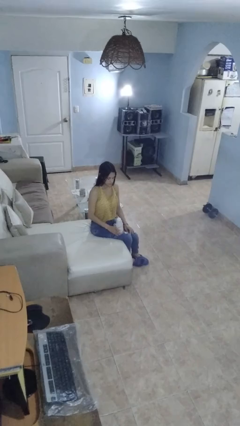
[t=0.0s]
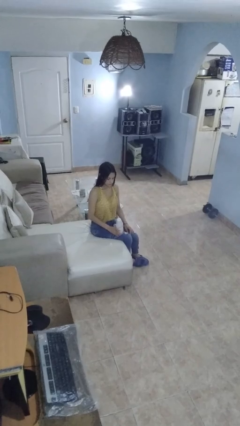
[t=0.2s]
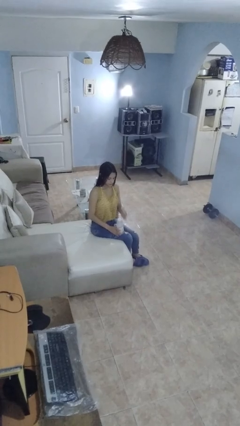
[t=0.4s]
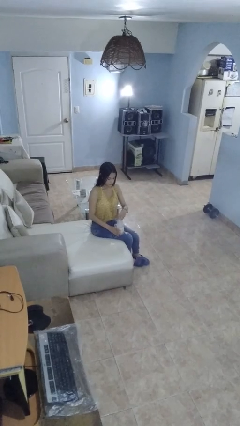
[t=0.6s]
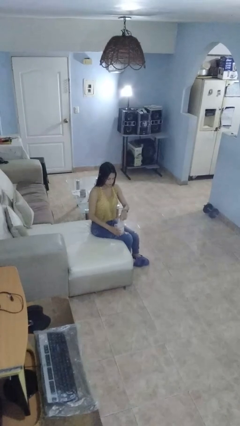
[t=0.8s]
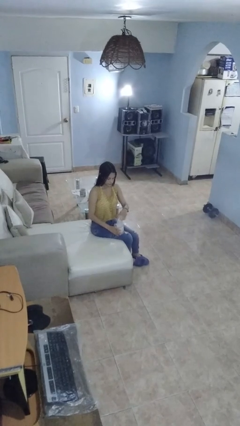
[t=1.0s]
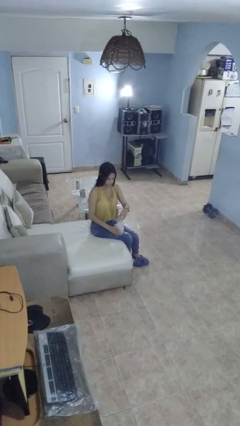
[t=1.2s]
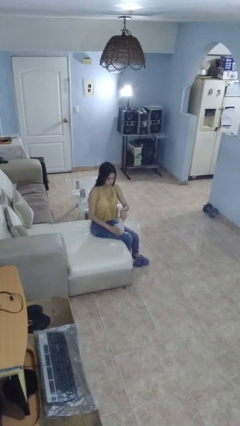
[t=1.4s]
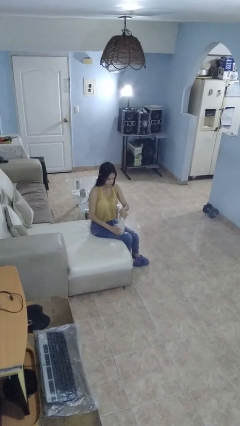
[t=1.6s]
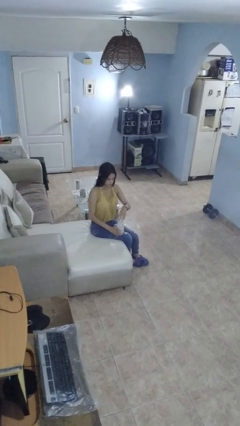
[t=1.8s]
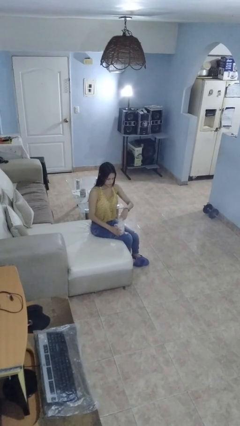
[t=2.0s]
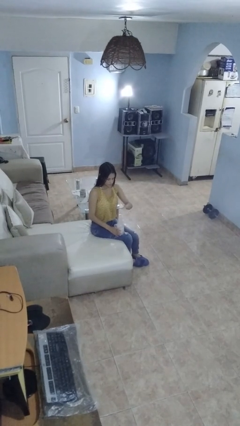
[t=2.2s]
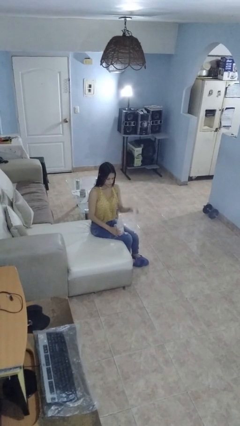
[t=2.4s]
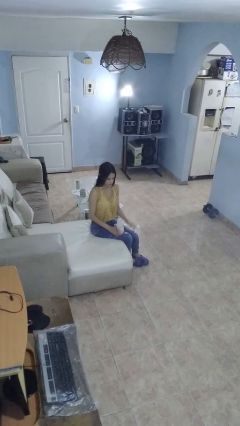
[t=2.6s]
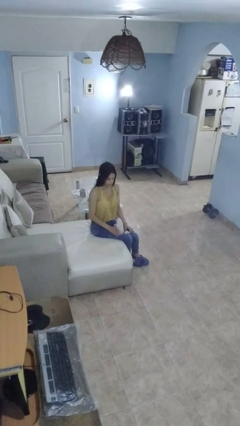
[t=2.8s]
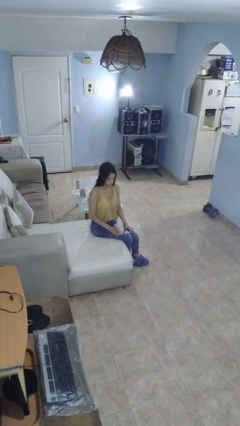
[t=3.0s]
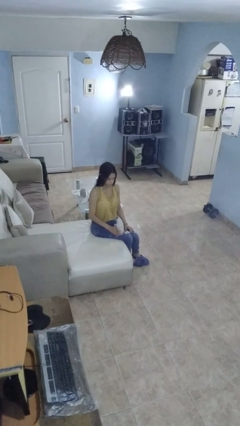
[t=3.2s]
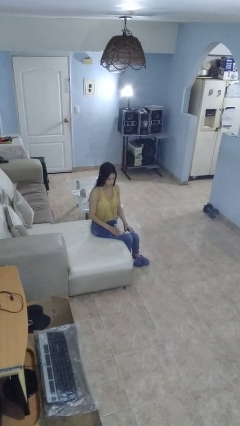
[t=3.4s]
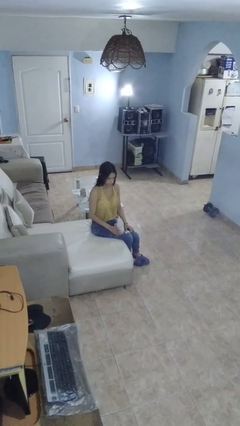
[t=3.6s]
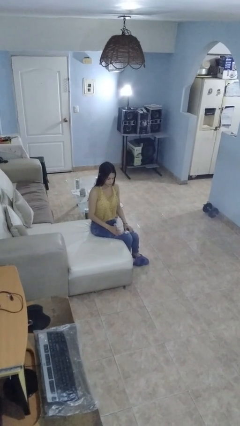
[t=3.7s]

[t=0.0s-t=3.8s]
person unscrews lid from bottle

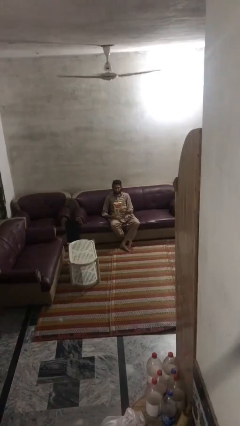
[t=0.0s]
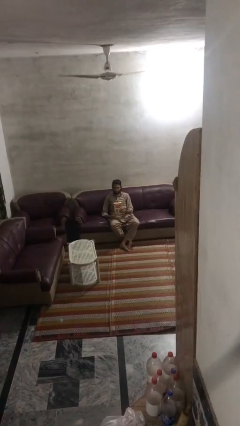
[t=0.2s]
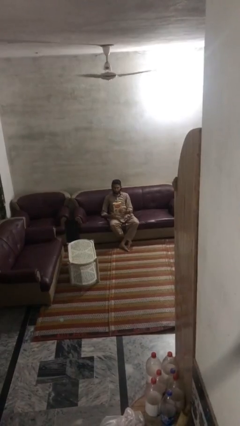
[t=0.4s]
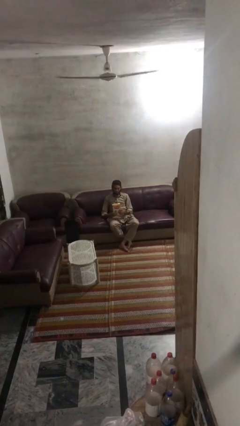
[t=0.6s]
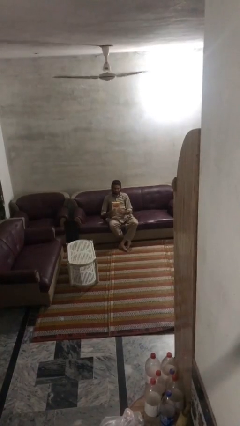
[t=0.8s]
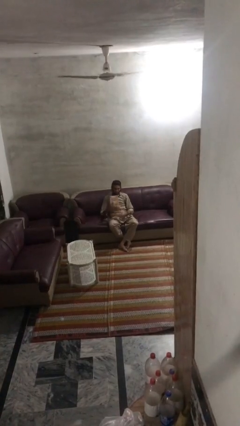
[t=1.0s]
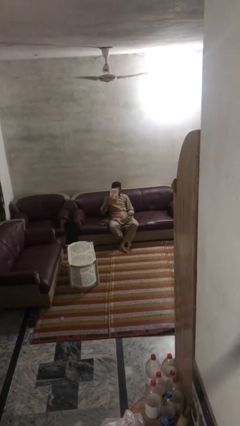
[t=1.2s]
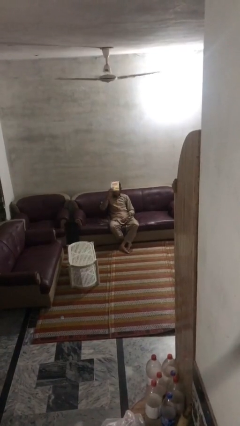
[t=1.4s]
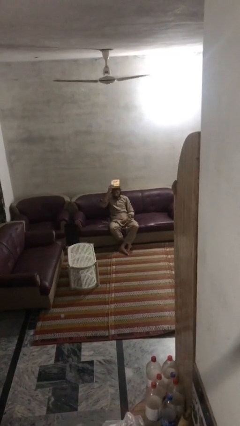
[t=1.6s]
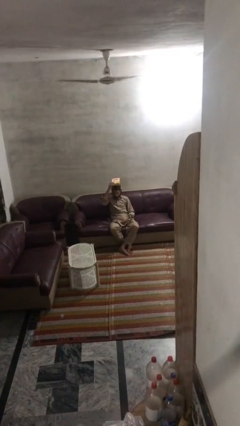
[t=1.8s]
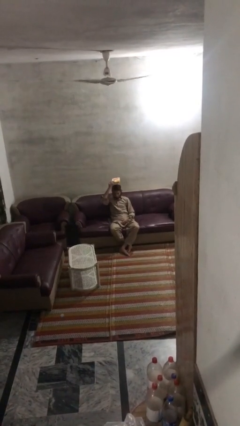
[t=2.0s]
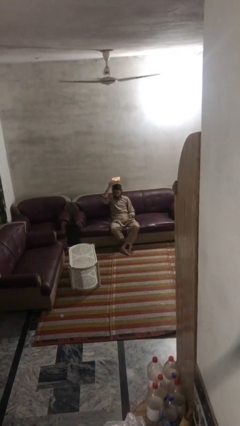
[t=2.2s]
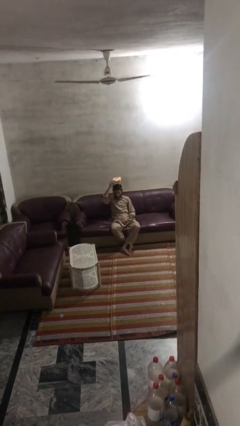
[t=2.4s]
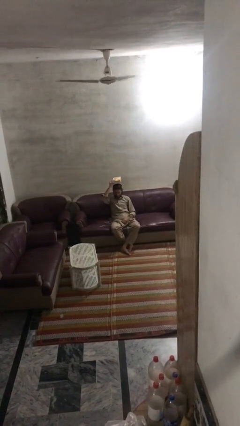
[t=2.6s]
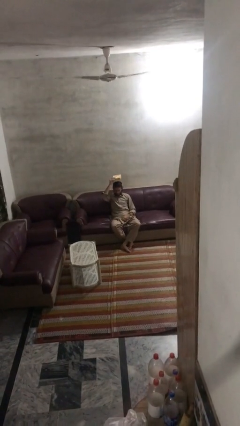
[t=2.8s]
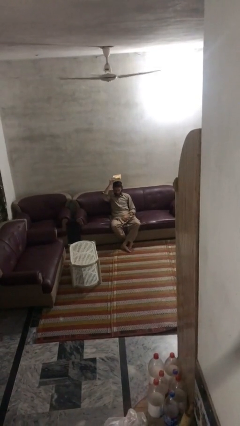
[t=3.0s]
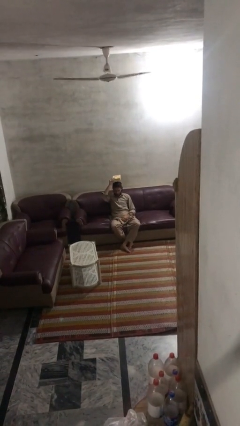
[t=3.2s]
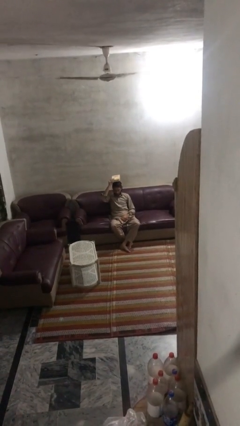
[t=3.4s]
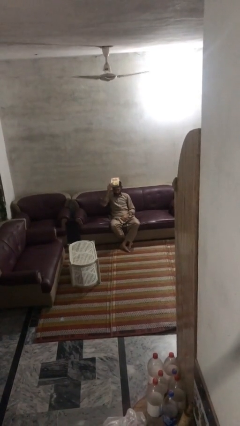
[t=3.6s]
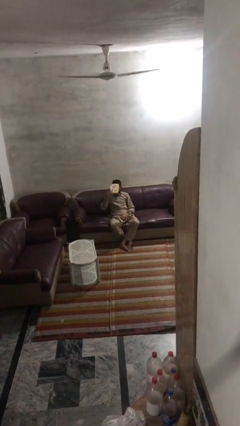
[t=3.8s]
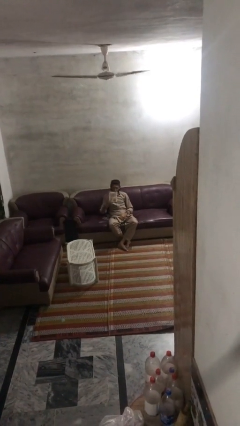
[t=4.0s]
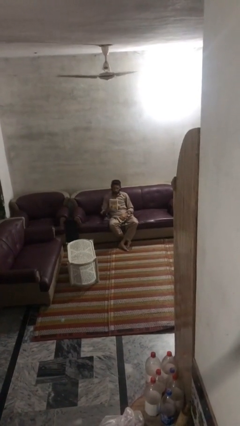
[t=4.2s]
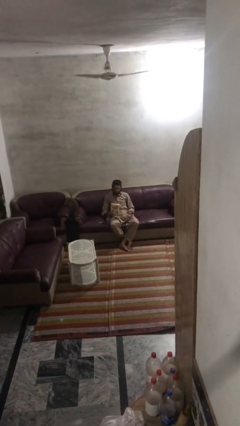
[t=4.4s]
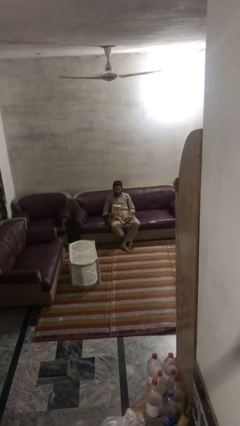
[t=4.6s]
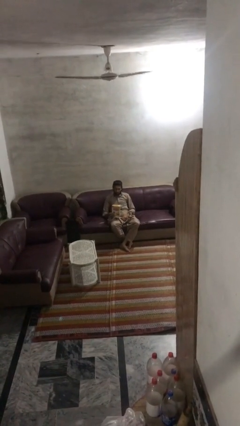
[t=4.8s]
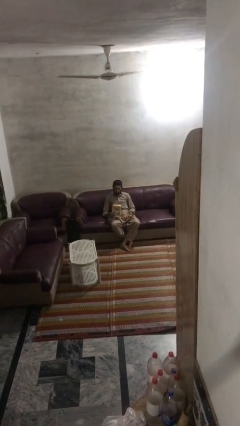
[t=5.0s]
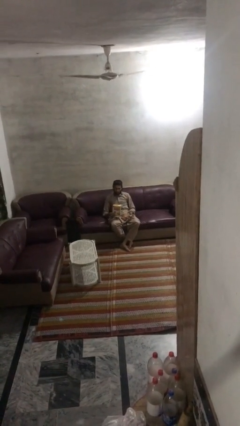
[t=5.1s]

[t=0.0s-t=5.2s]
person holds object above head

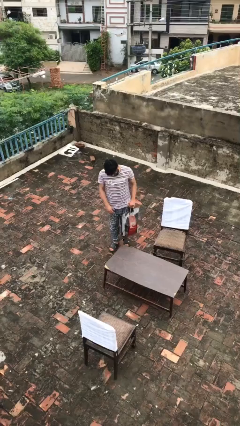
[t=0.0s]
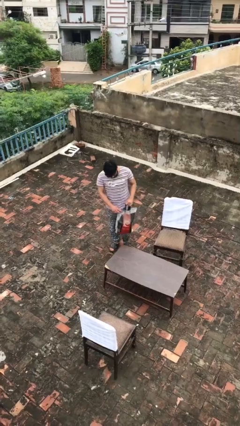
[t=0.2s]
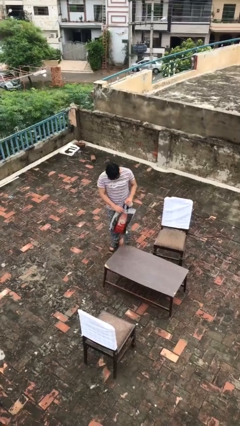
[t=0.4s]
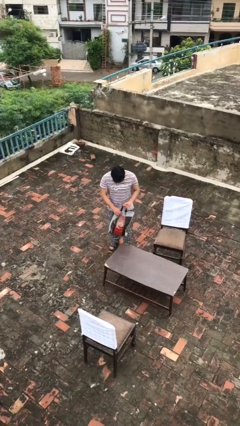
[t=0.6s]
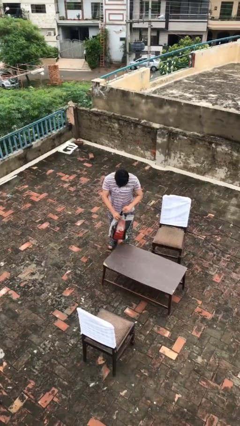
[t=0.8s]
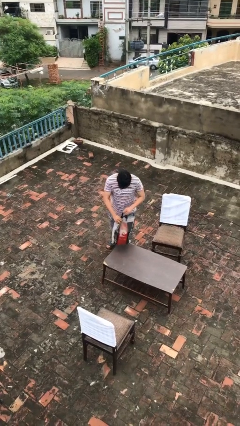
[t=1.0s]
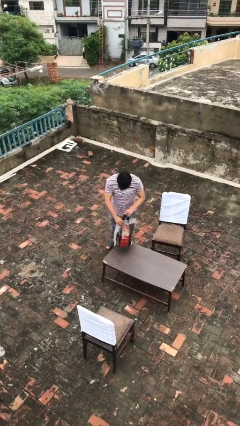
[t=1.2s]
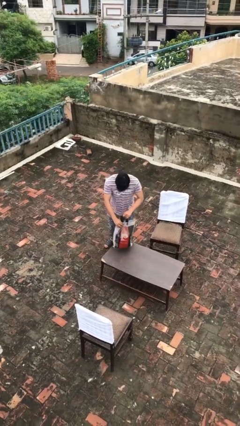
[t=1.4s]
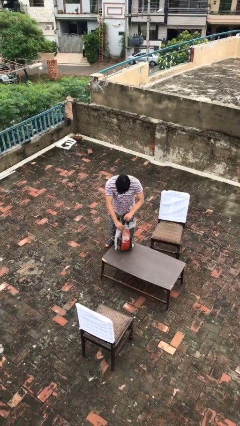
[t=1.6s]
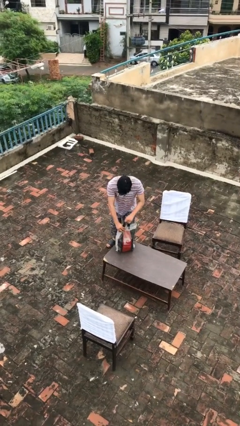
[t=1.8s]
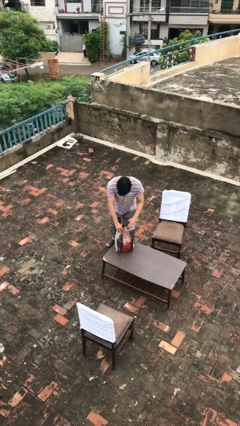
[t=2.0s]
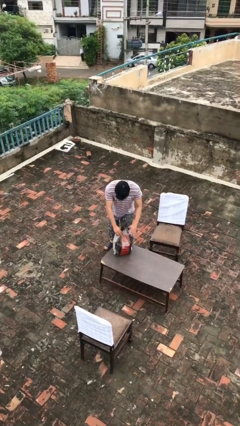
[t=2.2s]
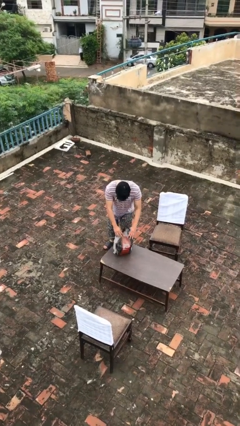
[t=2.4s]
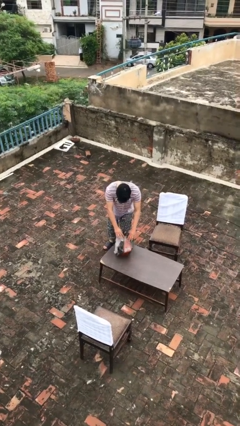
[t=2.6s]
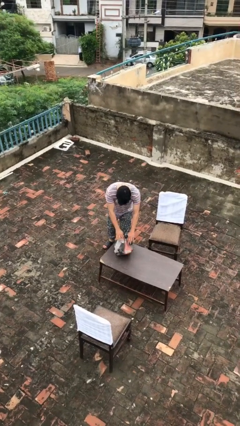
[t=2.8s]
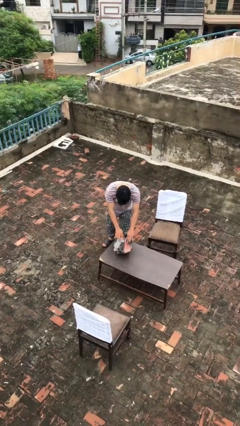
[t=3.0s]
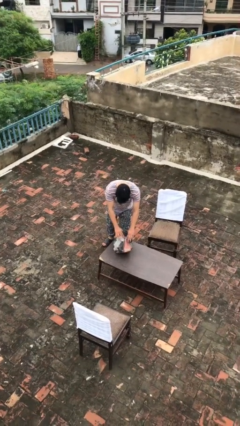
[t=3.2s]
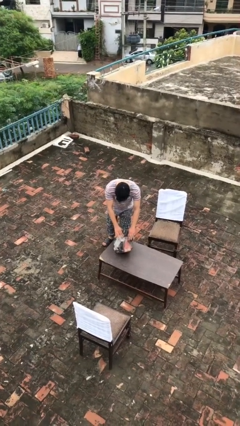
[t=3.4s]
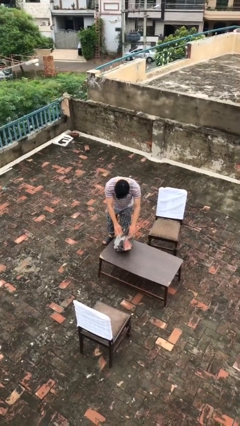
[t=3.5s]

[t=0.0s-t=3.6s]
person puts down object on table

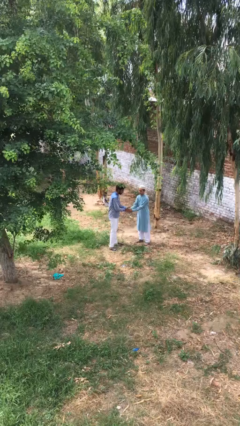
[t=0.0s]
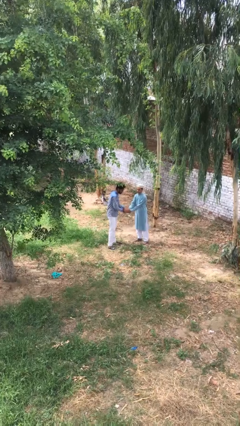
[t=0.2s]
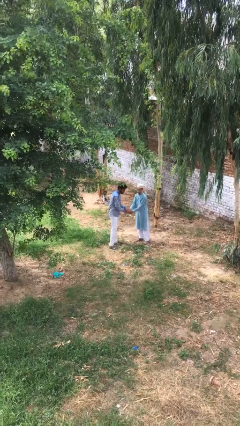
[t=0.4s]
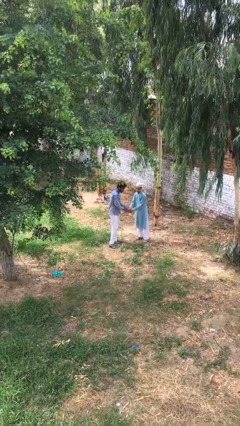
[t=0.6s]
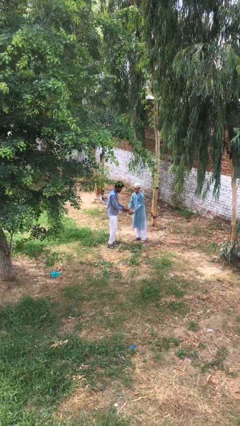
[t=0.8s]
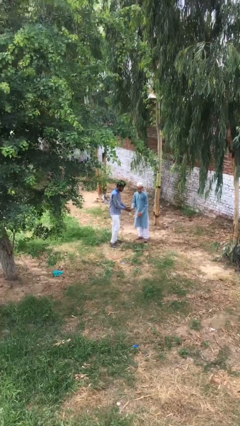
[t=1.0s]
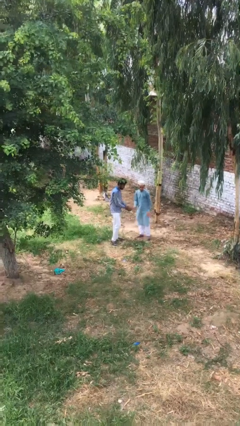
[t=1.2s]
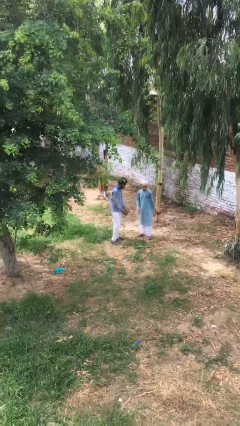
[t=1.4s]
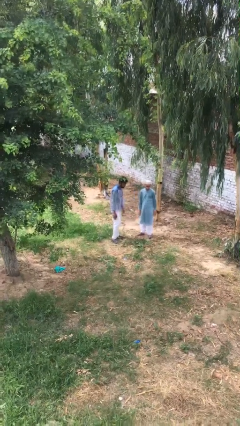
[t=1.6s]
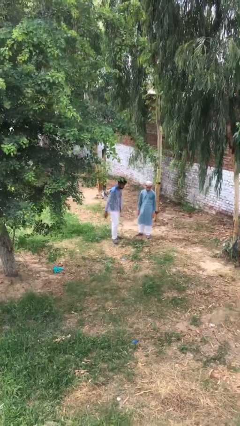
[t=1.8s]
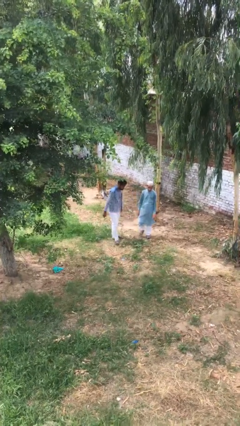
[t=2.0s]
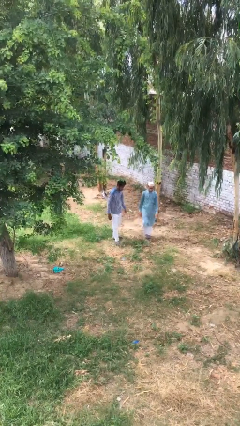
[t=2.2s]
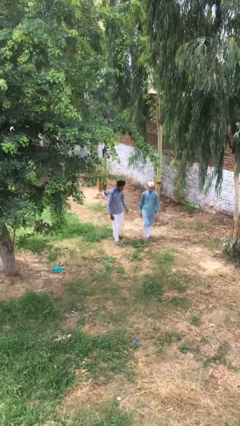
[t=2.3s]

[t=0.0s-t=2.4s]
person shakes hand

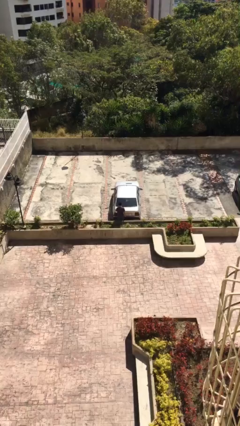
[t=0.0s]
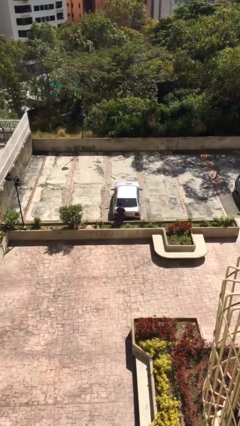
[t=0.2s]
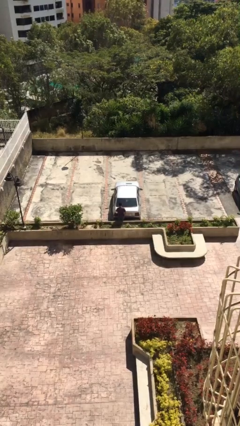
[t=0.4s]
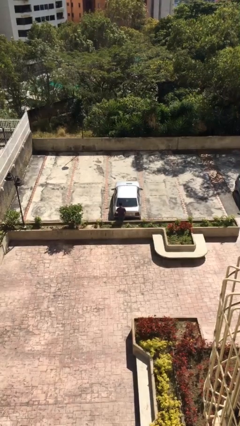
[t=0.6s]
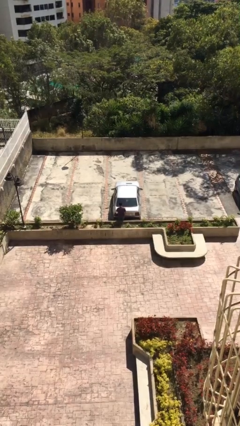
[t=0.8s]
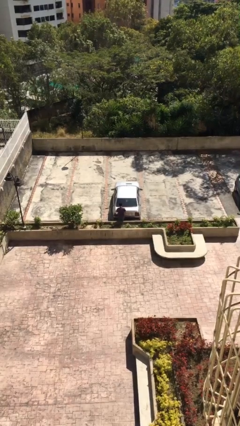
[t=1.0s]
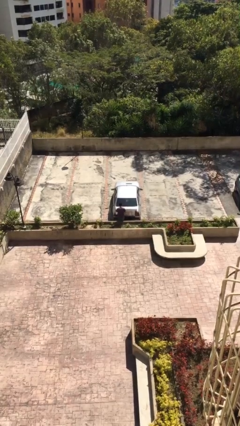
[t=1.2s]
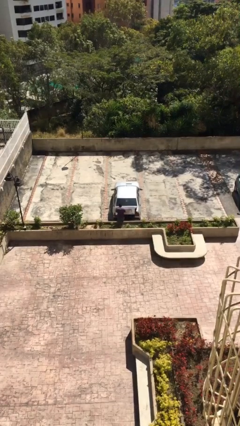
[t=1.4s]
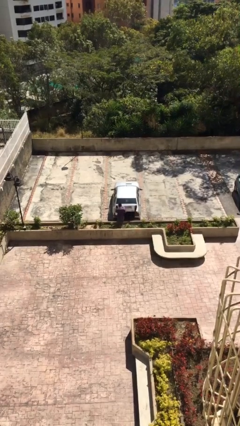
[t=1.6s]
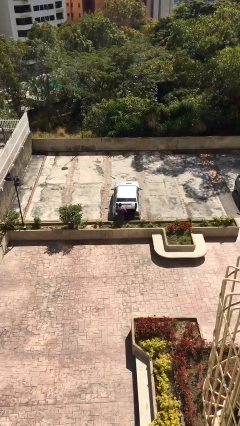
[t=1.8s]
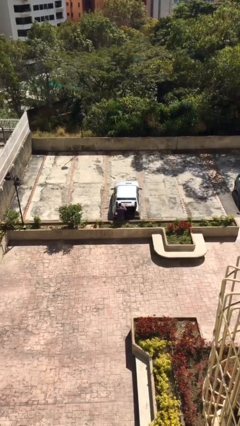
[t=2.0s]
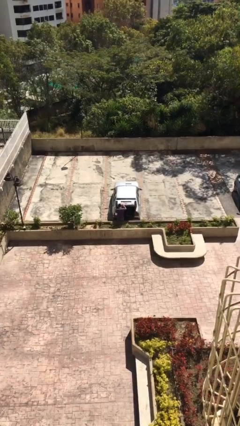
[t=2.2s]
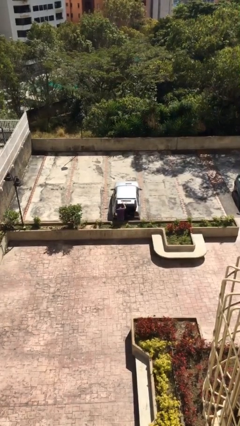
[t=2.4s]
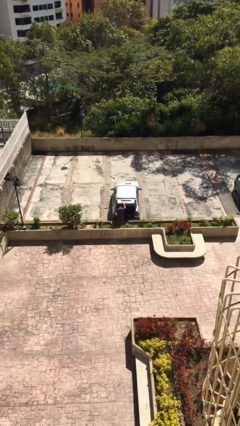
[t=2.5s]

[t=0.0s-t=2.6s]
person opens car trunk

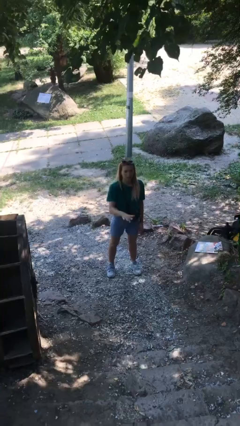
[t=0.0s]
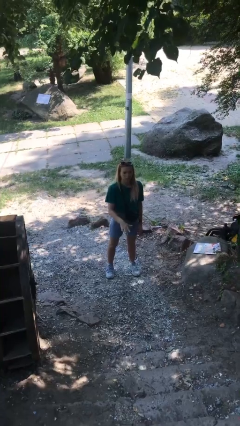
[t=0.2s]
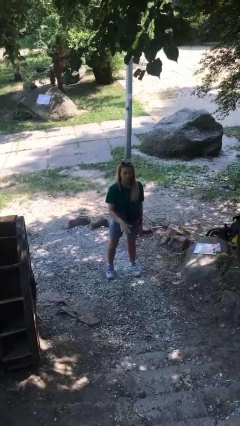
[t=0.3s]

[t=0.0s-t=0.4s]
person gestures swipe down
